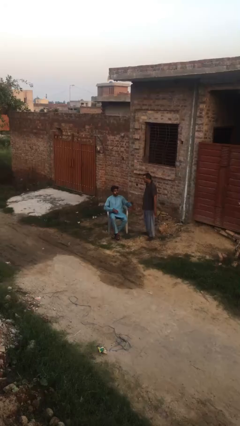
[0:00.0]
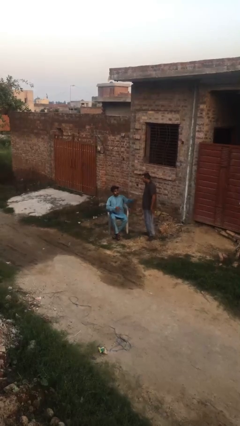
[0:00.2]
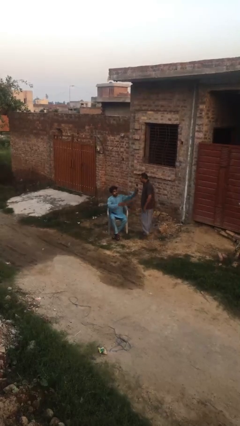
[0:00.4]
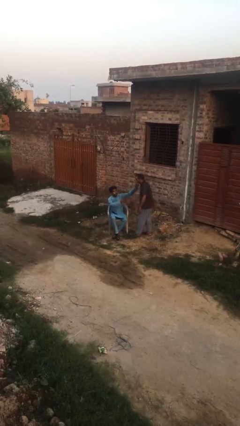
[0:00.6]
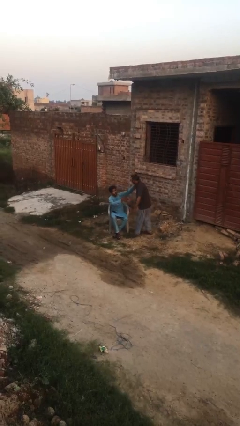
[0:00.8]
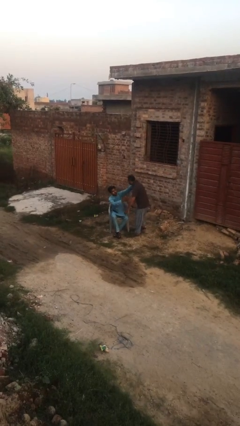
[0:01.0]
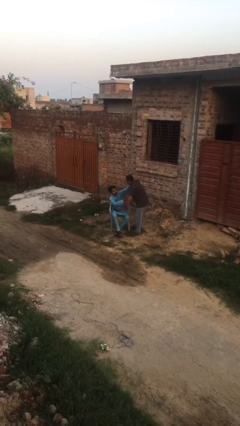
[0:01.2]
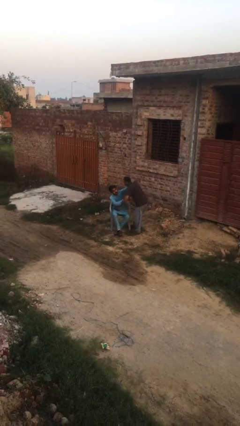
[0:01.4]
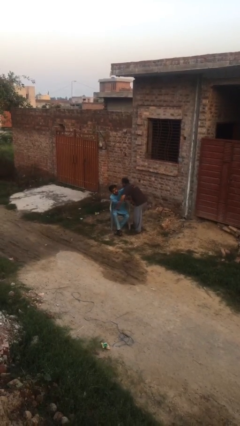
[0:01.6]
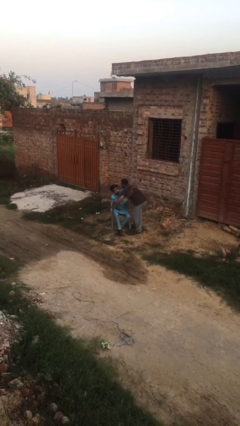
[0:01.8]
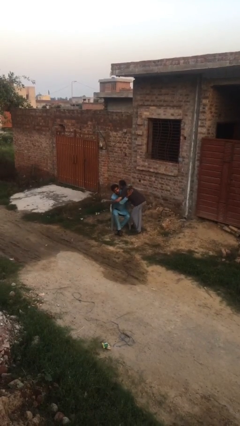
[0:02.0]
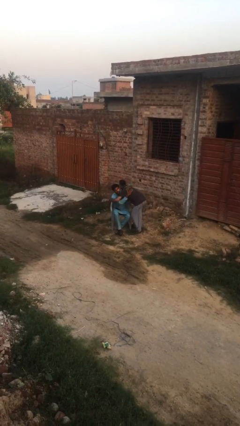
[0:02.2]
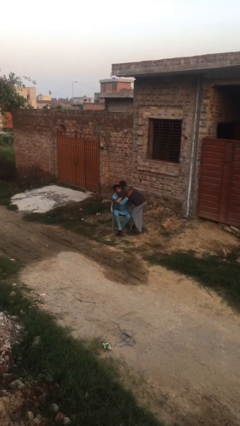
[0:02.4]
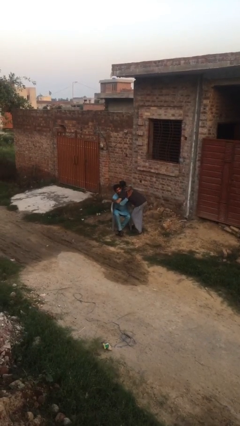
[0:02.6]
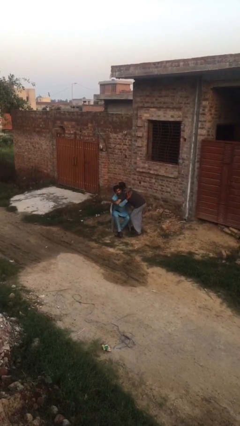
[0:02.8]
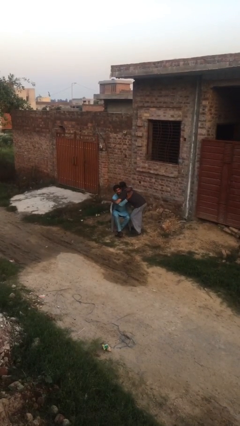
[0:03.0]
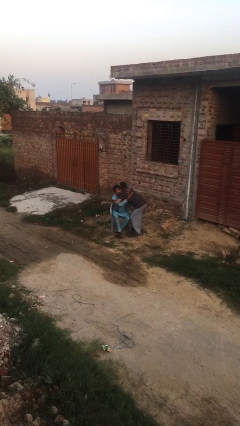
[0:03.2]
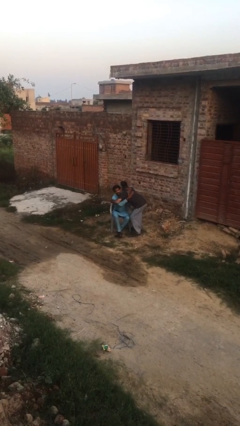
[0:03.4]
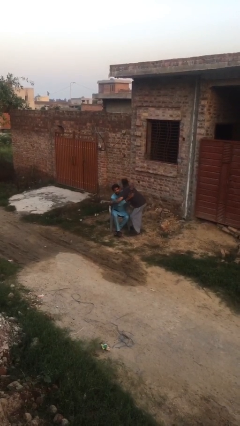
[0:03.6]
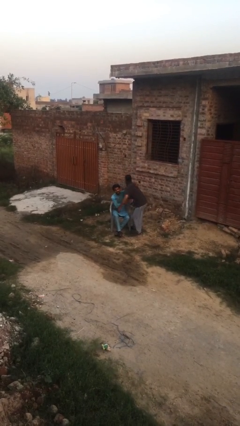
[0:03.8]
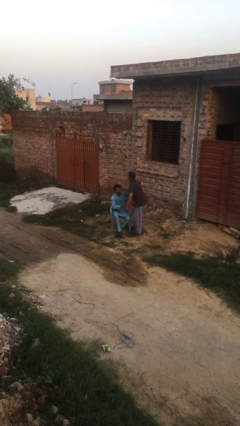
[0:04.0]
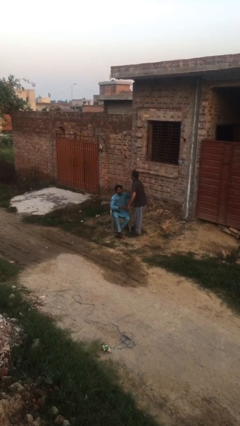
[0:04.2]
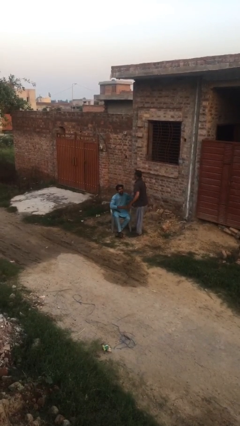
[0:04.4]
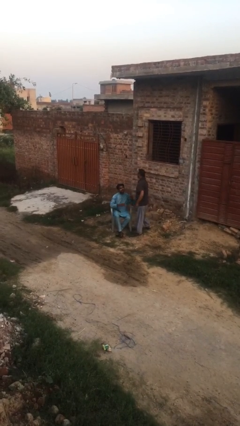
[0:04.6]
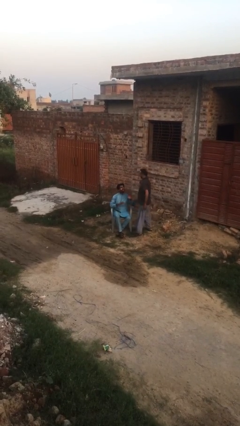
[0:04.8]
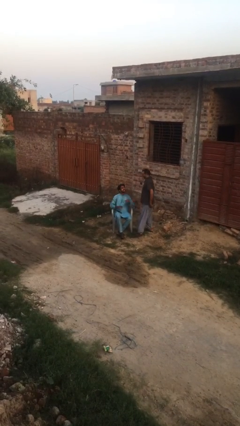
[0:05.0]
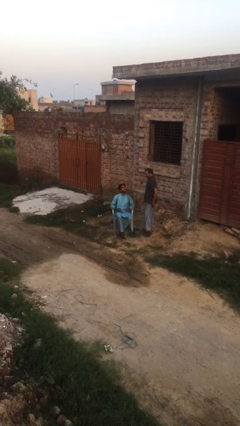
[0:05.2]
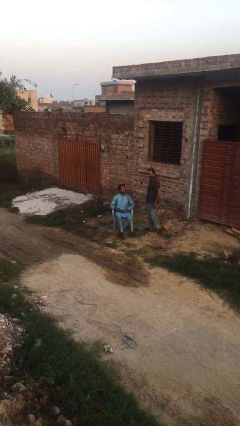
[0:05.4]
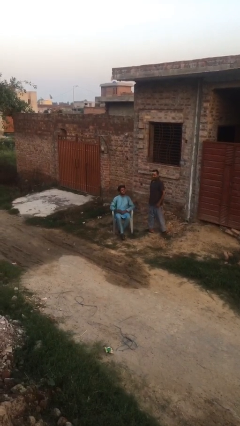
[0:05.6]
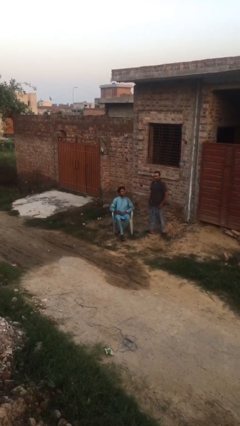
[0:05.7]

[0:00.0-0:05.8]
person embraces person

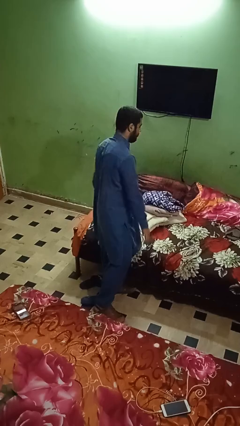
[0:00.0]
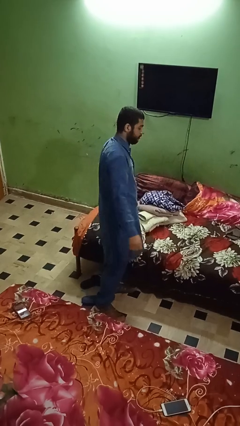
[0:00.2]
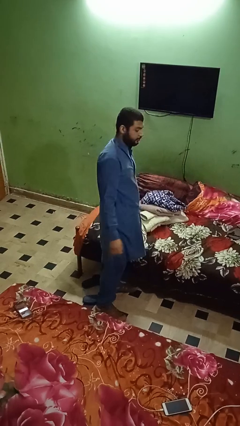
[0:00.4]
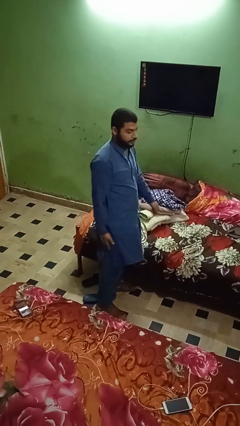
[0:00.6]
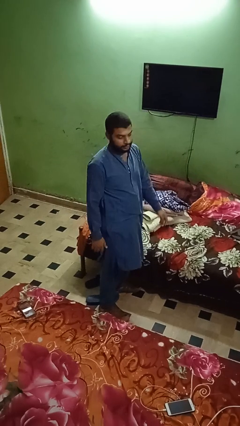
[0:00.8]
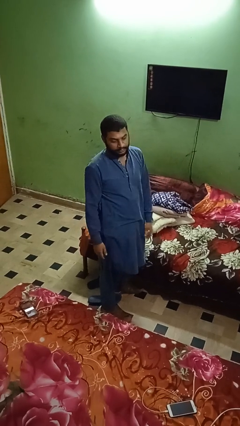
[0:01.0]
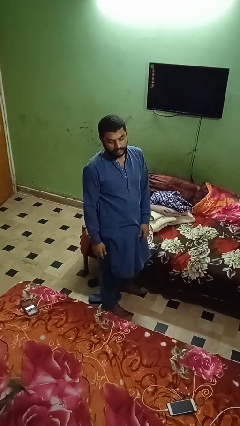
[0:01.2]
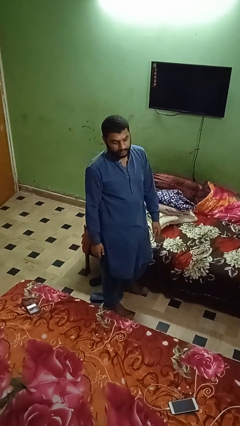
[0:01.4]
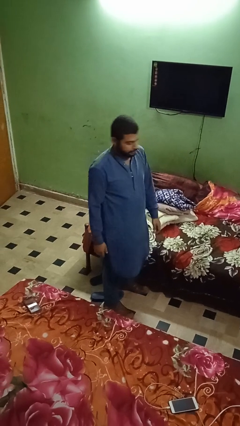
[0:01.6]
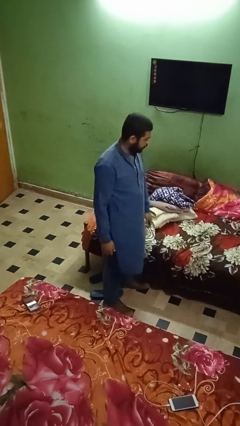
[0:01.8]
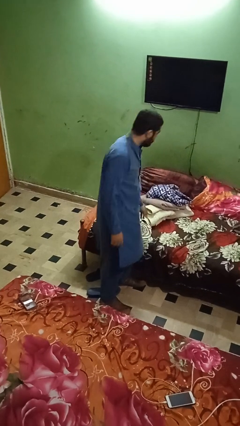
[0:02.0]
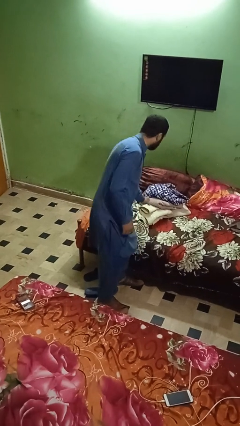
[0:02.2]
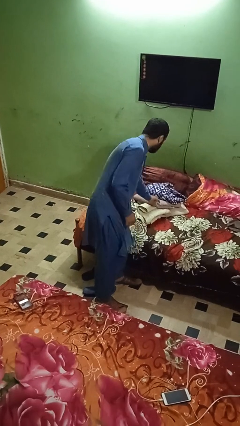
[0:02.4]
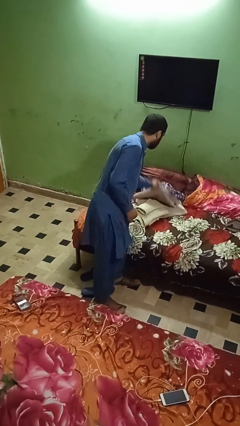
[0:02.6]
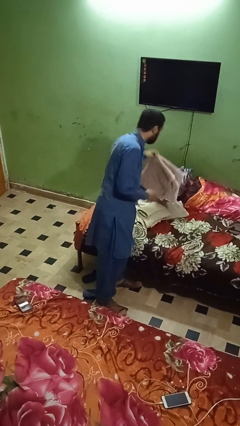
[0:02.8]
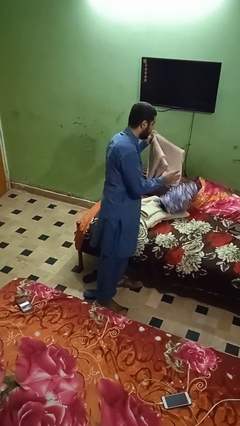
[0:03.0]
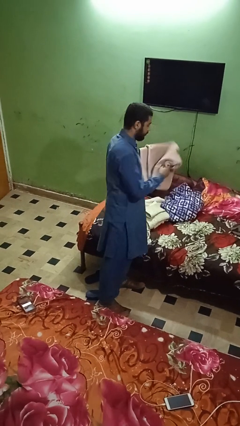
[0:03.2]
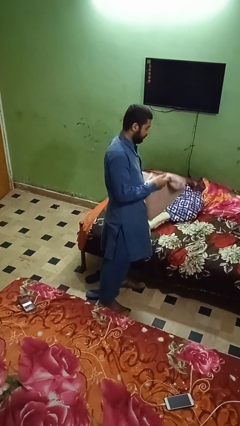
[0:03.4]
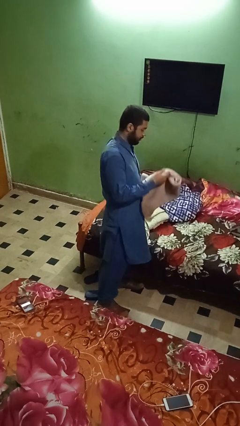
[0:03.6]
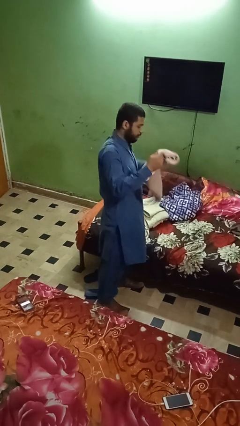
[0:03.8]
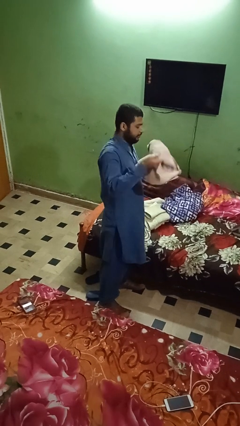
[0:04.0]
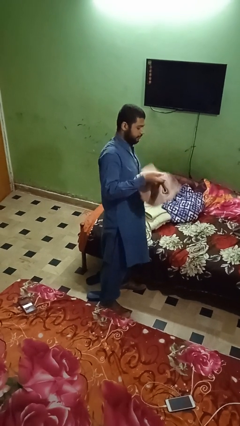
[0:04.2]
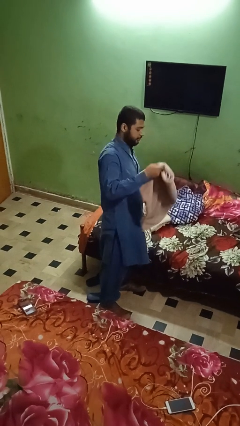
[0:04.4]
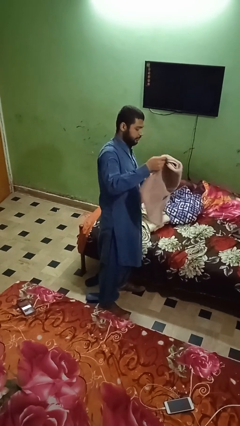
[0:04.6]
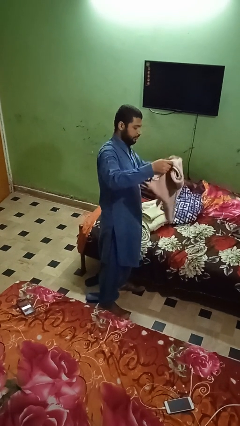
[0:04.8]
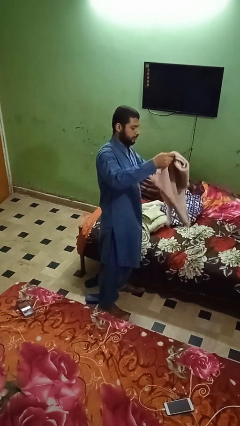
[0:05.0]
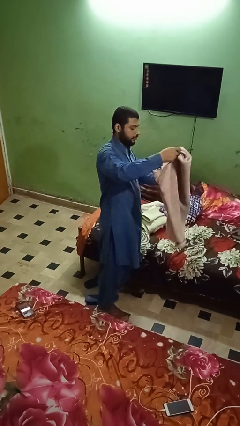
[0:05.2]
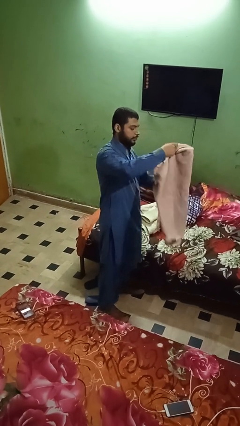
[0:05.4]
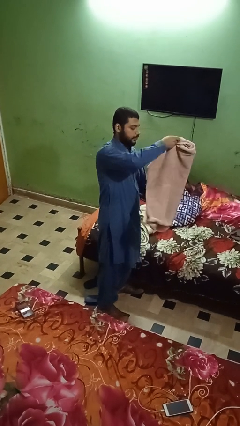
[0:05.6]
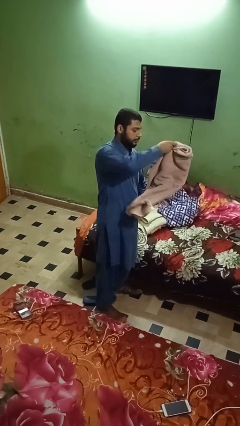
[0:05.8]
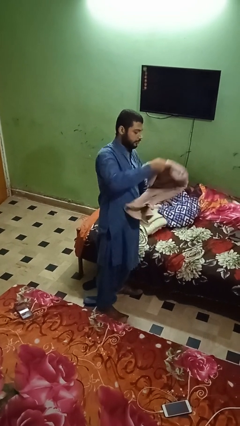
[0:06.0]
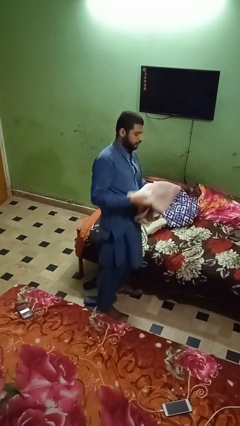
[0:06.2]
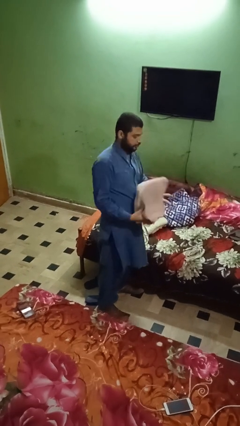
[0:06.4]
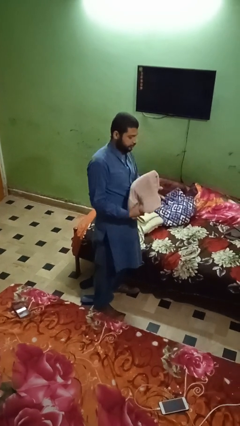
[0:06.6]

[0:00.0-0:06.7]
person folds towel

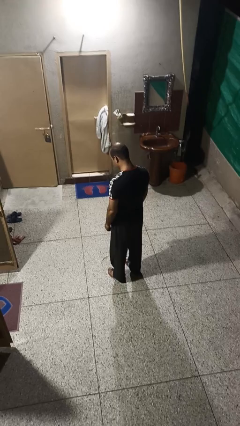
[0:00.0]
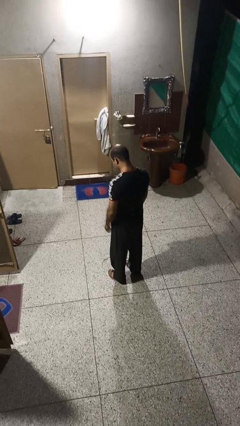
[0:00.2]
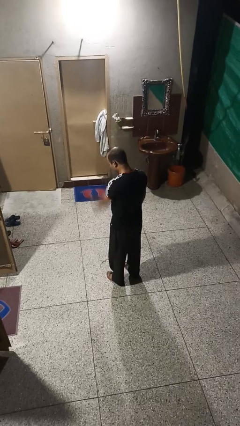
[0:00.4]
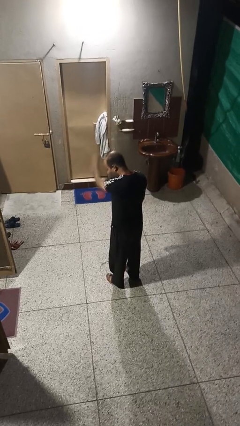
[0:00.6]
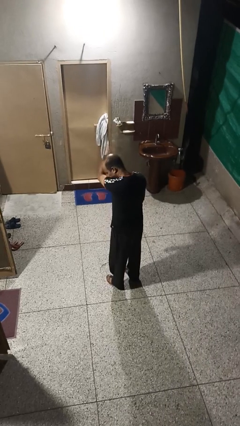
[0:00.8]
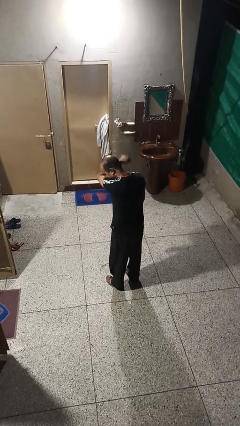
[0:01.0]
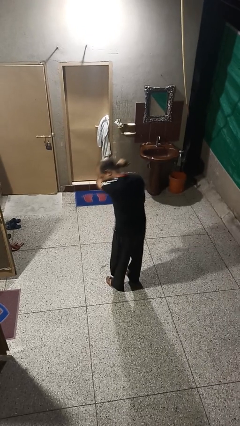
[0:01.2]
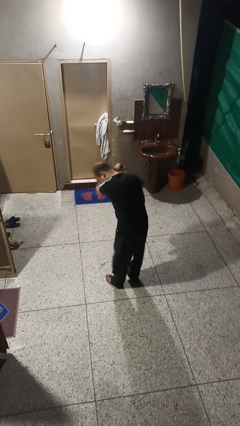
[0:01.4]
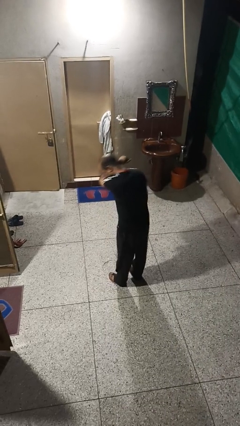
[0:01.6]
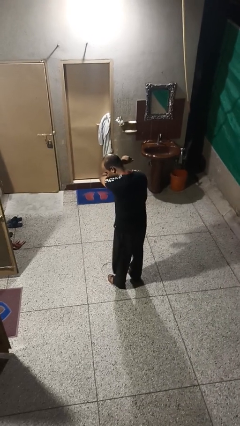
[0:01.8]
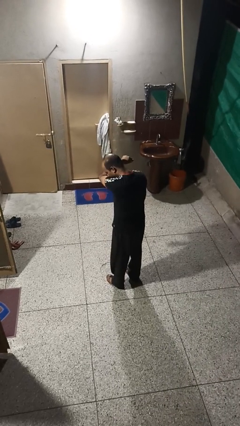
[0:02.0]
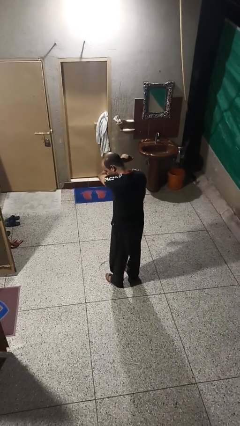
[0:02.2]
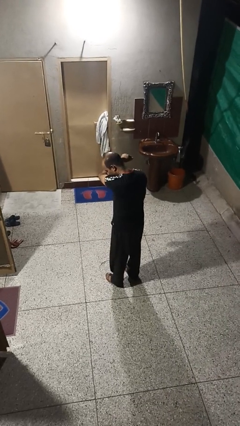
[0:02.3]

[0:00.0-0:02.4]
person sneezes into arm

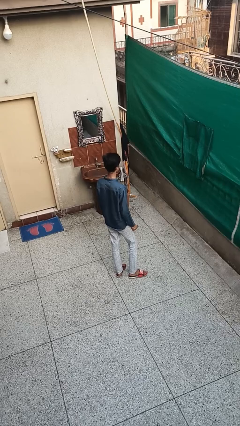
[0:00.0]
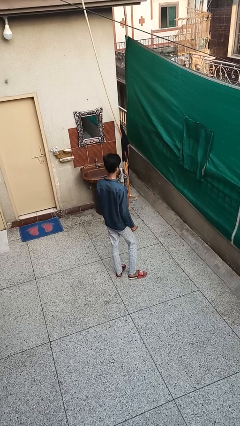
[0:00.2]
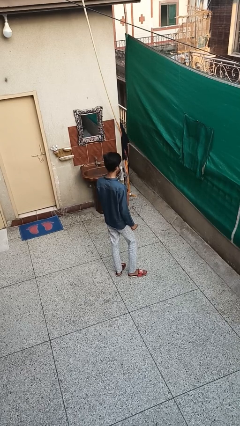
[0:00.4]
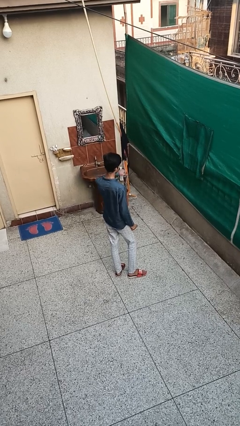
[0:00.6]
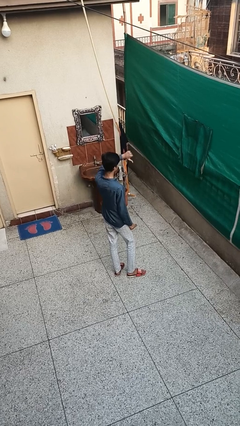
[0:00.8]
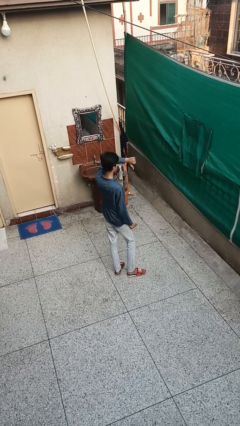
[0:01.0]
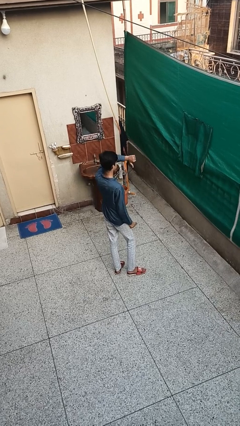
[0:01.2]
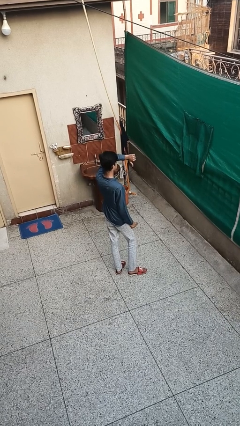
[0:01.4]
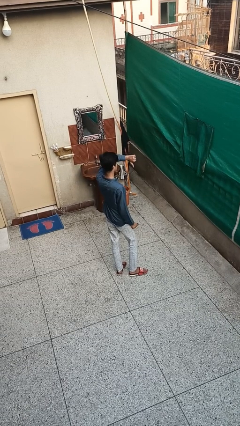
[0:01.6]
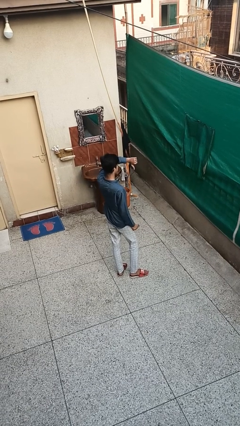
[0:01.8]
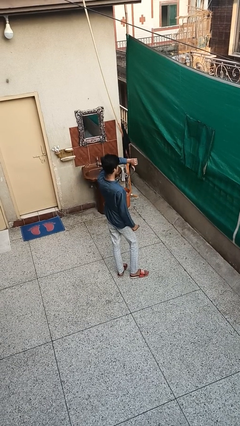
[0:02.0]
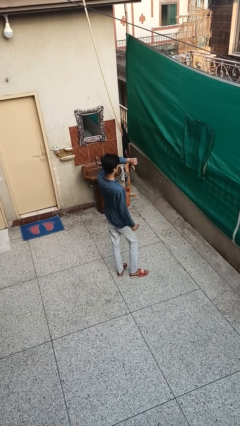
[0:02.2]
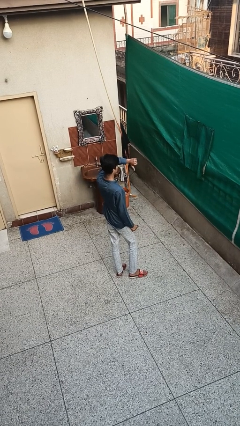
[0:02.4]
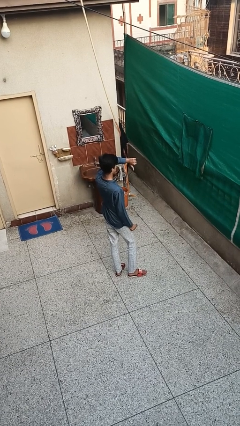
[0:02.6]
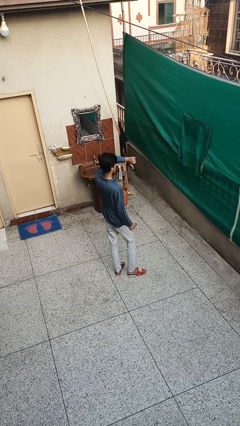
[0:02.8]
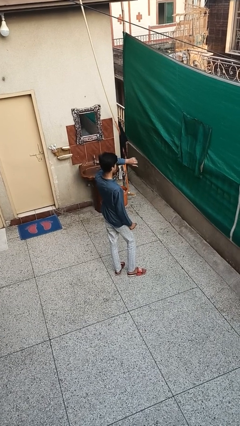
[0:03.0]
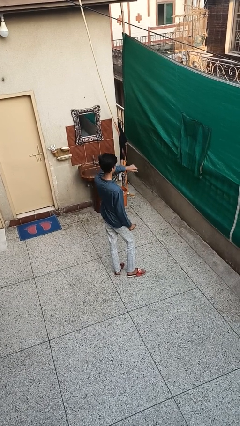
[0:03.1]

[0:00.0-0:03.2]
person gestures thumbs down
